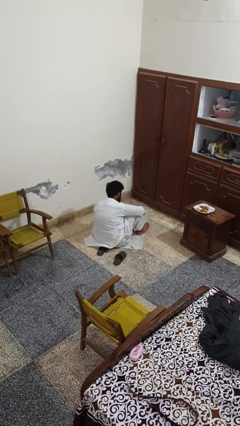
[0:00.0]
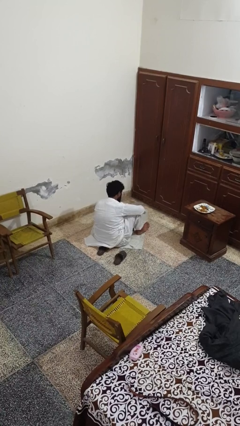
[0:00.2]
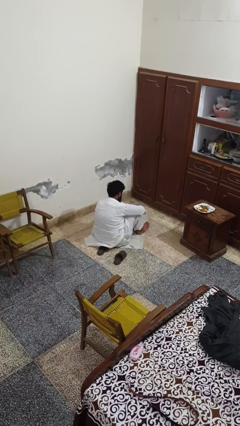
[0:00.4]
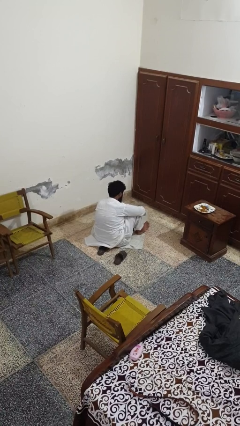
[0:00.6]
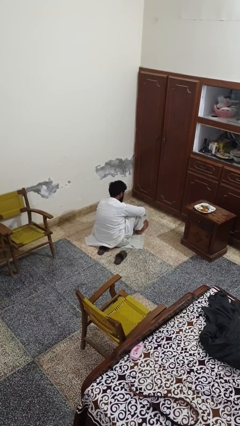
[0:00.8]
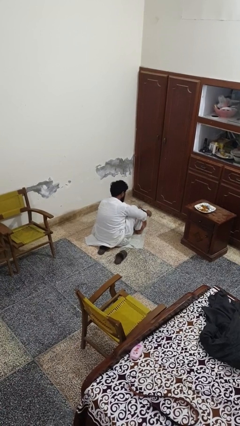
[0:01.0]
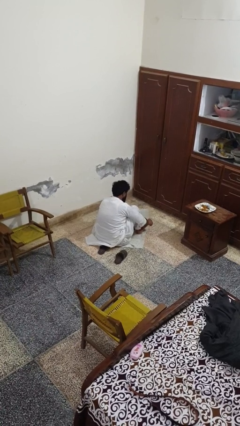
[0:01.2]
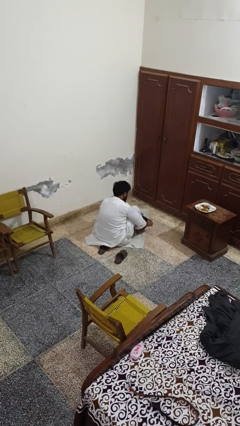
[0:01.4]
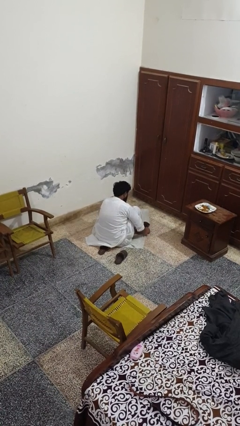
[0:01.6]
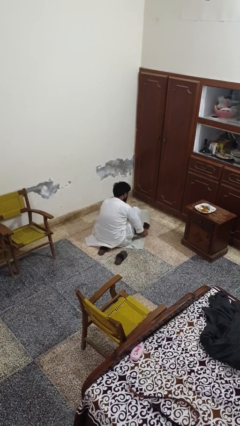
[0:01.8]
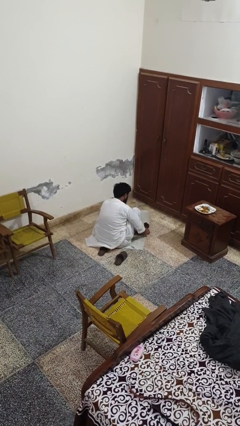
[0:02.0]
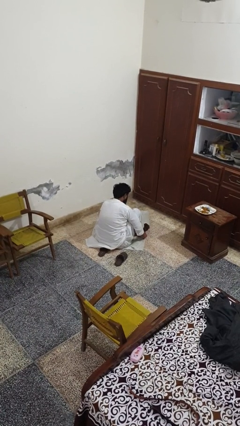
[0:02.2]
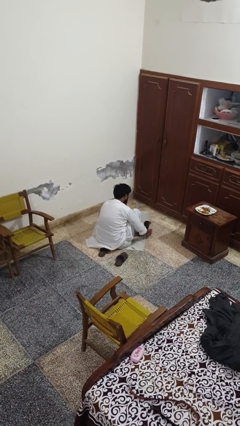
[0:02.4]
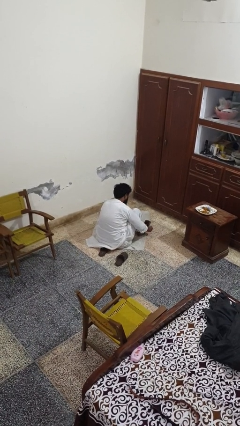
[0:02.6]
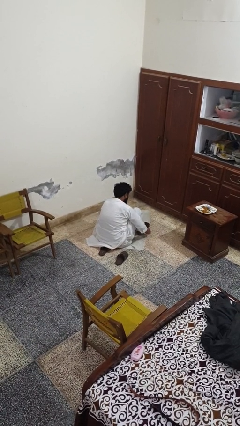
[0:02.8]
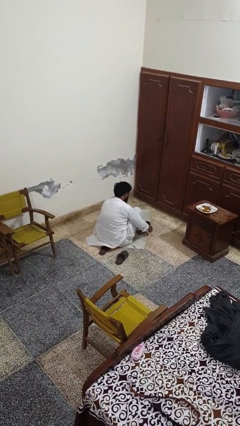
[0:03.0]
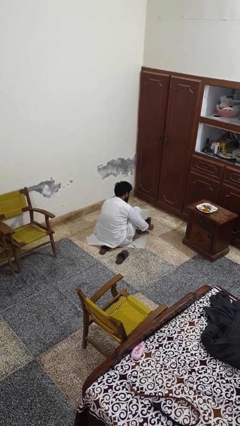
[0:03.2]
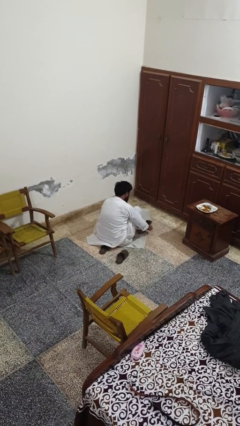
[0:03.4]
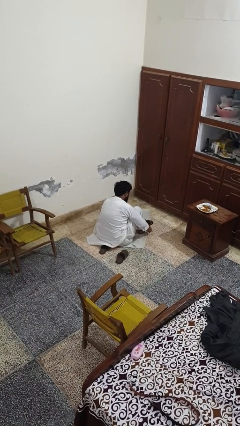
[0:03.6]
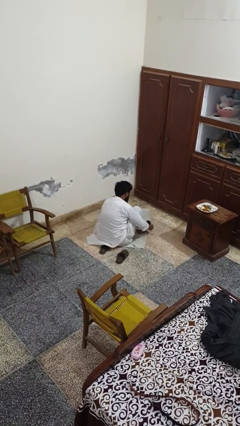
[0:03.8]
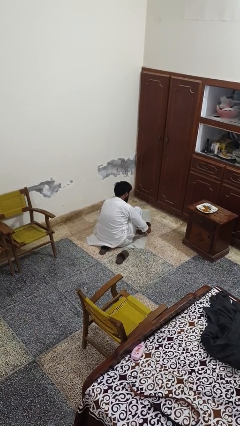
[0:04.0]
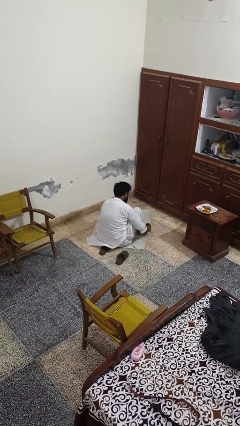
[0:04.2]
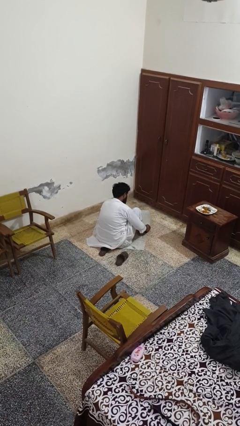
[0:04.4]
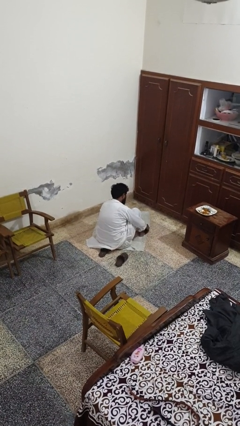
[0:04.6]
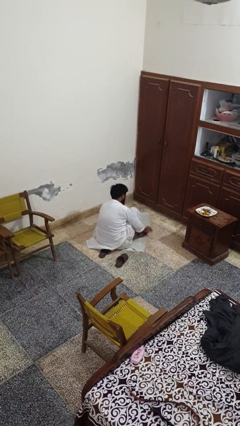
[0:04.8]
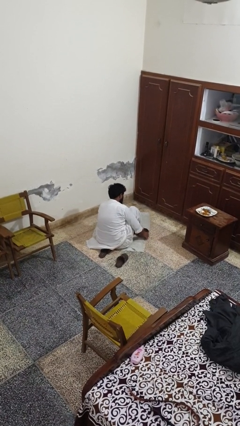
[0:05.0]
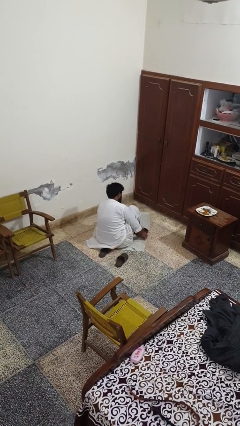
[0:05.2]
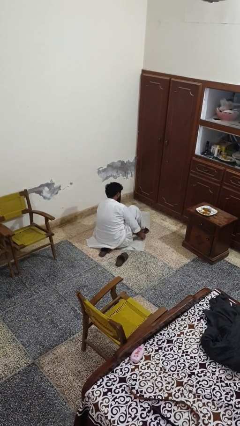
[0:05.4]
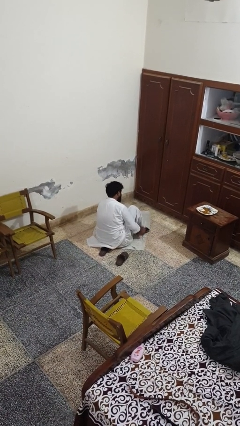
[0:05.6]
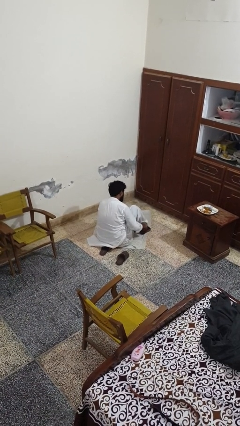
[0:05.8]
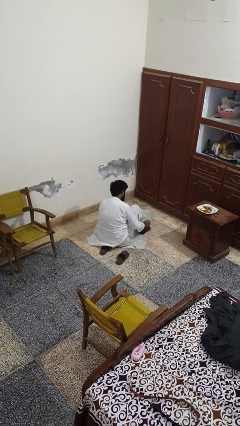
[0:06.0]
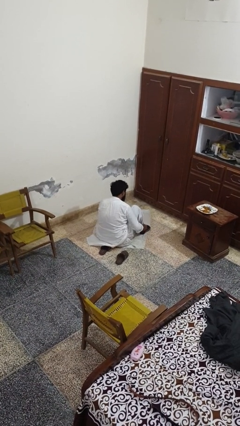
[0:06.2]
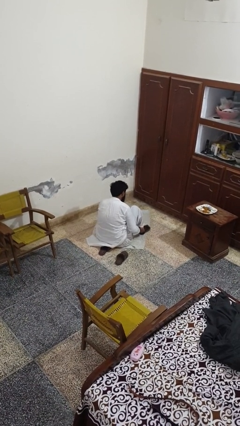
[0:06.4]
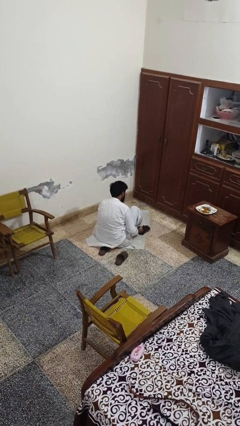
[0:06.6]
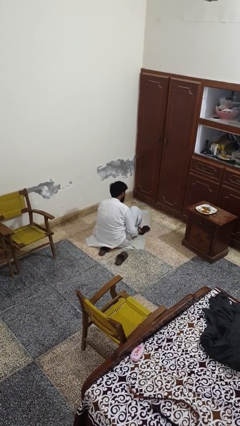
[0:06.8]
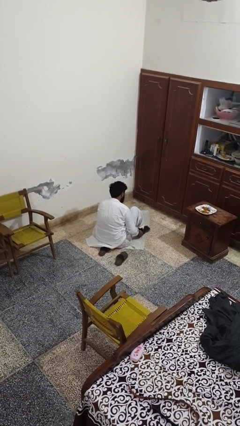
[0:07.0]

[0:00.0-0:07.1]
person puts on socks

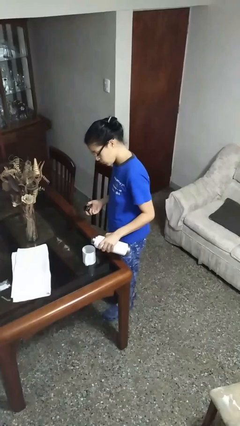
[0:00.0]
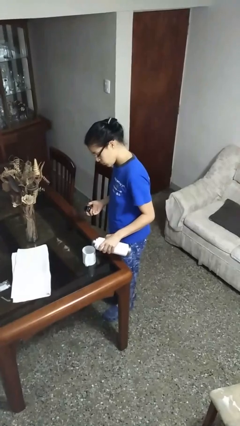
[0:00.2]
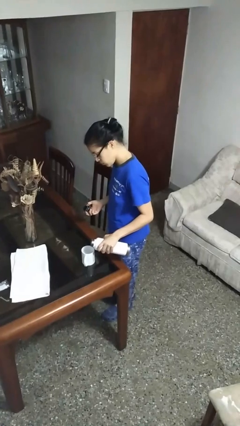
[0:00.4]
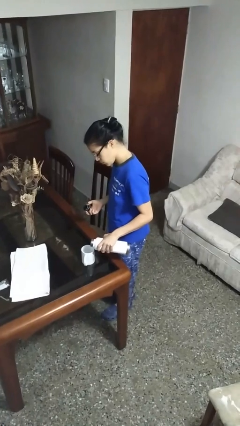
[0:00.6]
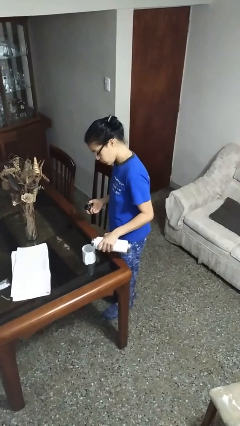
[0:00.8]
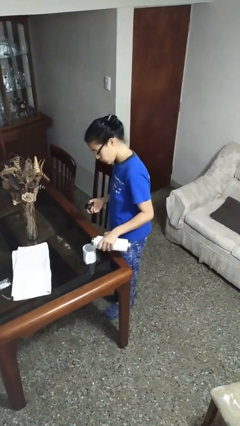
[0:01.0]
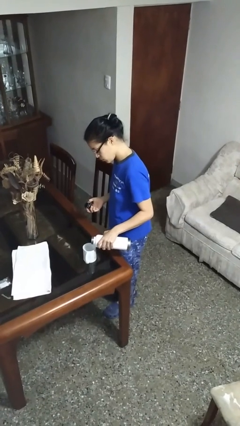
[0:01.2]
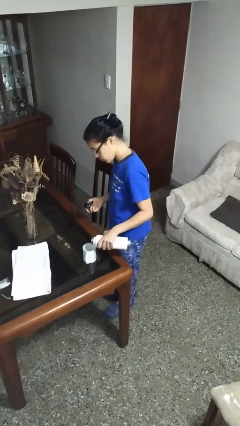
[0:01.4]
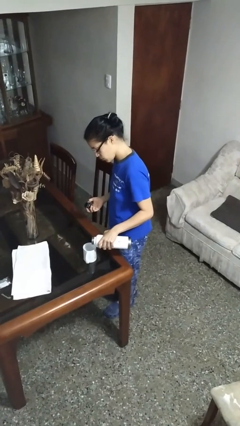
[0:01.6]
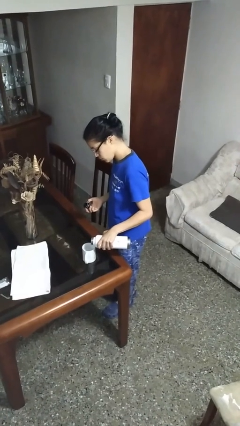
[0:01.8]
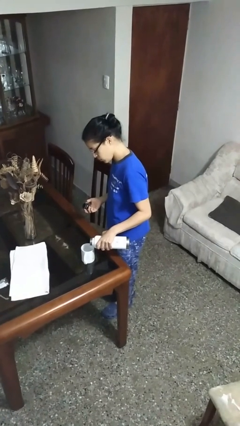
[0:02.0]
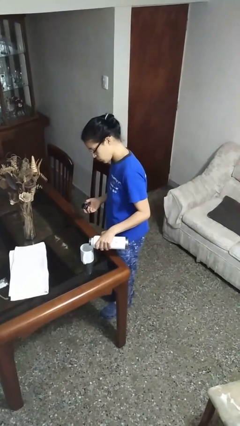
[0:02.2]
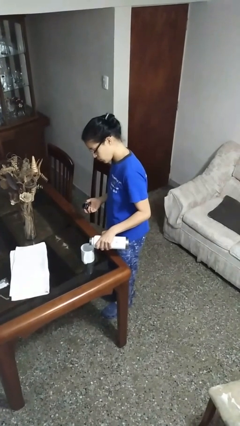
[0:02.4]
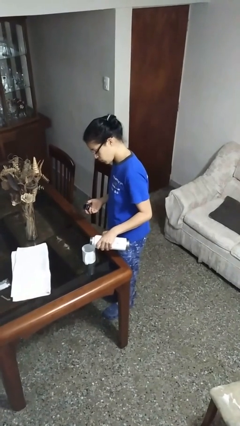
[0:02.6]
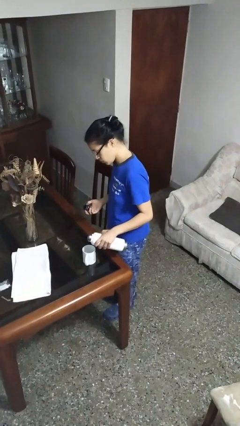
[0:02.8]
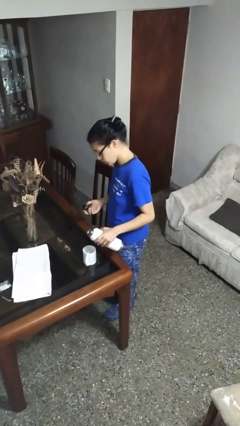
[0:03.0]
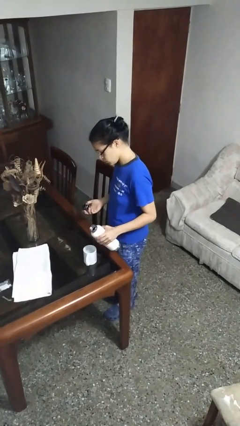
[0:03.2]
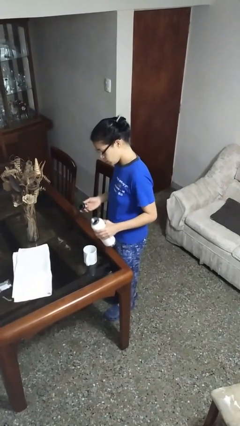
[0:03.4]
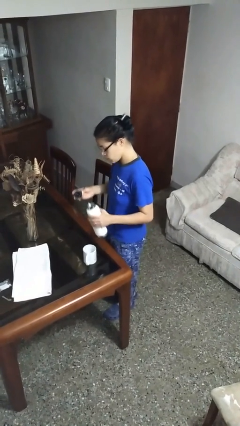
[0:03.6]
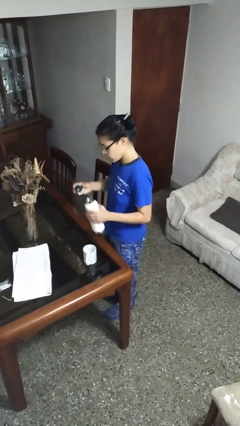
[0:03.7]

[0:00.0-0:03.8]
person pours liquid into cup

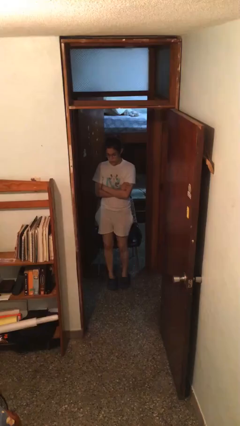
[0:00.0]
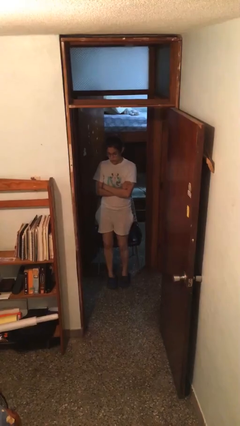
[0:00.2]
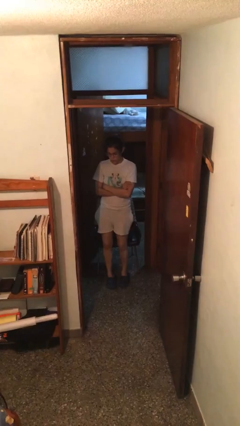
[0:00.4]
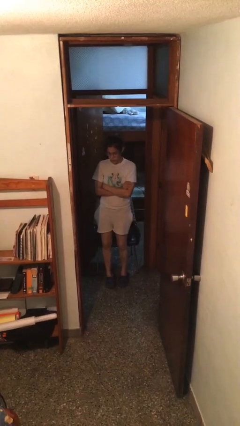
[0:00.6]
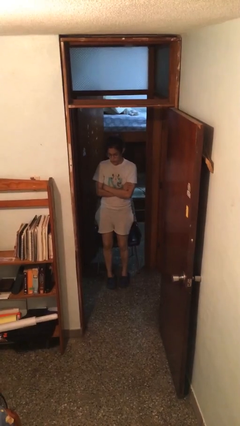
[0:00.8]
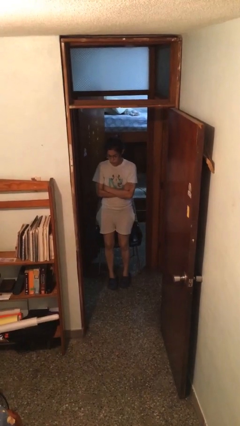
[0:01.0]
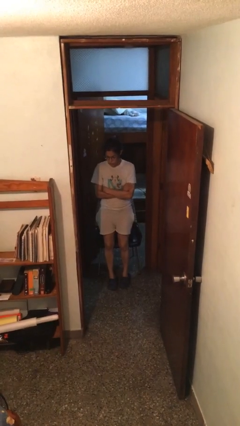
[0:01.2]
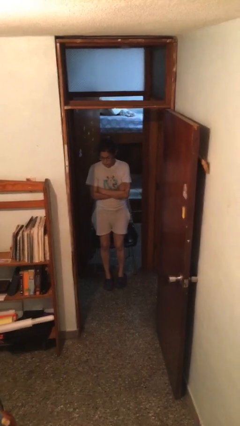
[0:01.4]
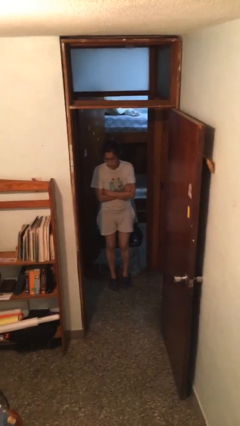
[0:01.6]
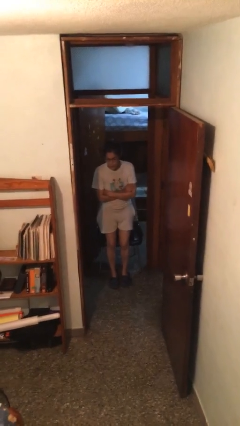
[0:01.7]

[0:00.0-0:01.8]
person stands up

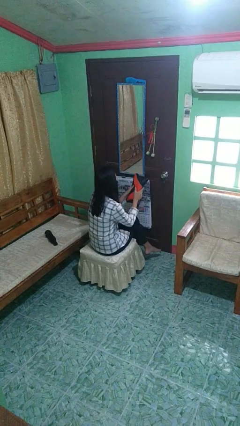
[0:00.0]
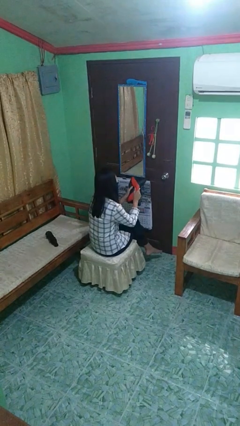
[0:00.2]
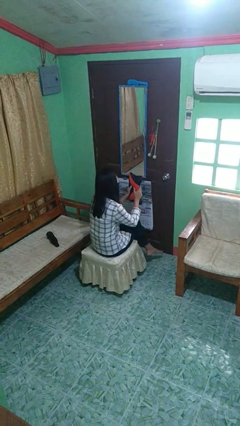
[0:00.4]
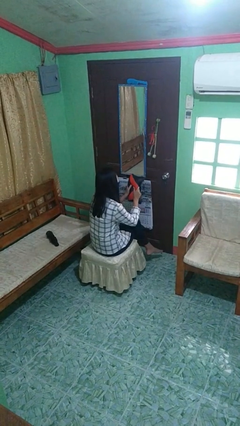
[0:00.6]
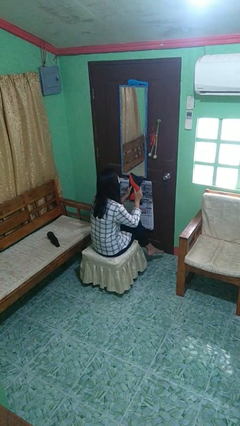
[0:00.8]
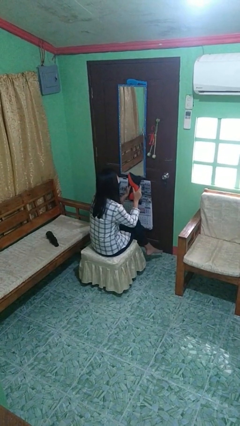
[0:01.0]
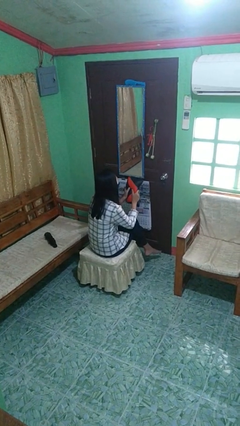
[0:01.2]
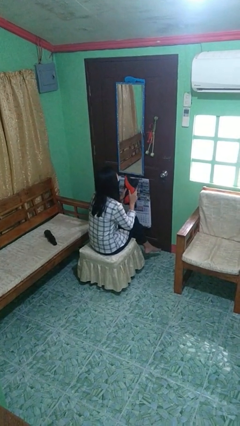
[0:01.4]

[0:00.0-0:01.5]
person squeezes object

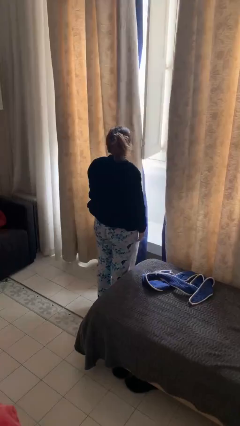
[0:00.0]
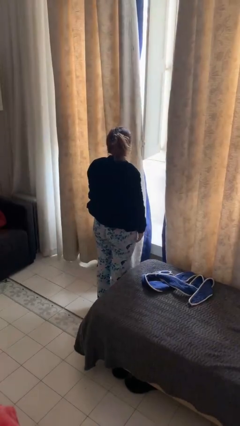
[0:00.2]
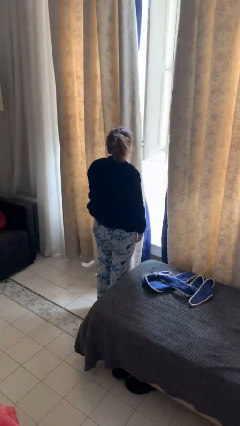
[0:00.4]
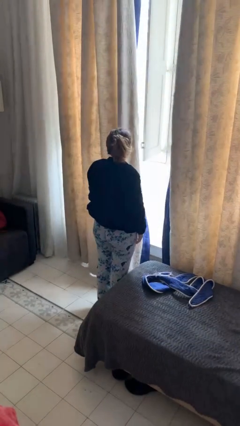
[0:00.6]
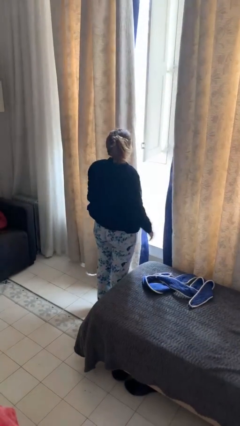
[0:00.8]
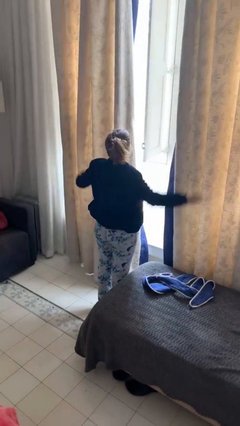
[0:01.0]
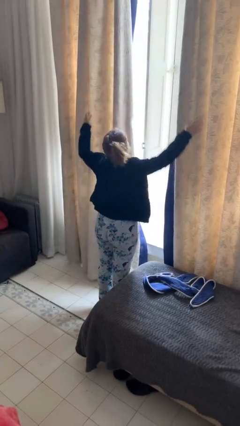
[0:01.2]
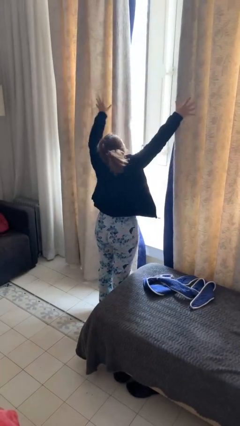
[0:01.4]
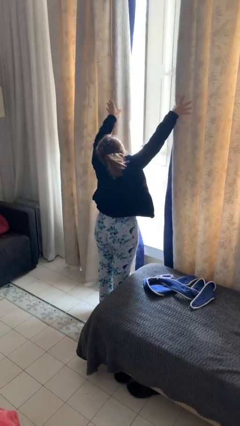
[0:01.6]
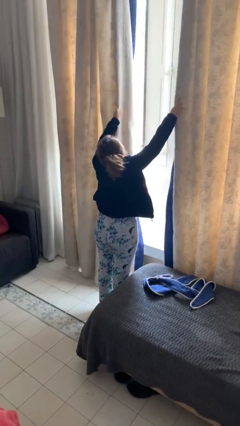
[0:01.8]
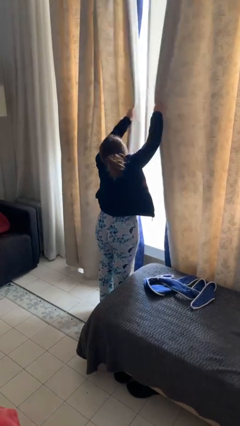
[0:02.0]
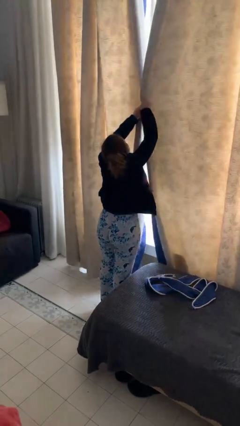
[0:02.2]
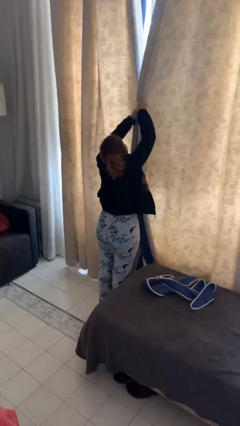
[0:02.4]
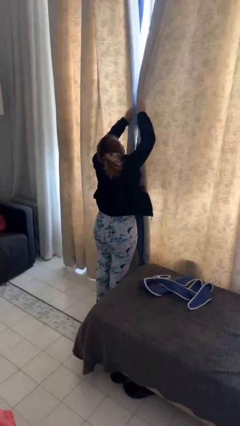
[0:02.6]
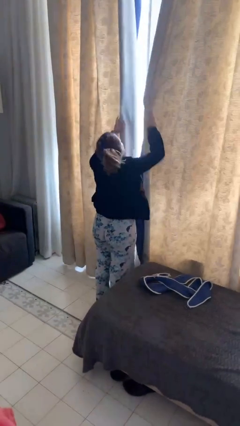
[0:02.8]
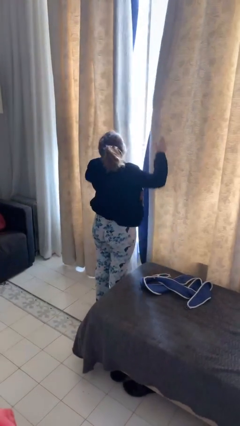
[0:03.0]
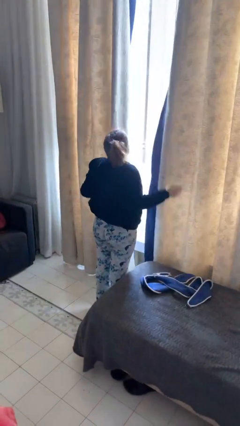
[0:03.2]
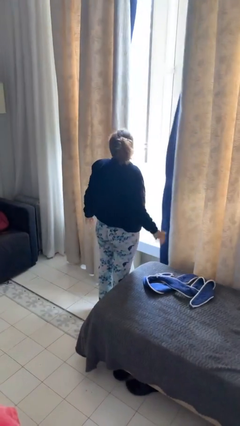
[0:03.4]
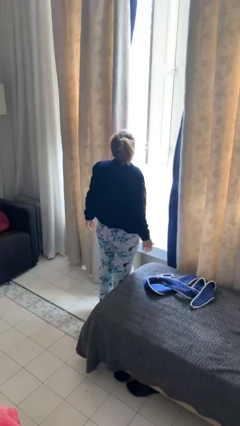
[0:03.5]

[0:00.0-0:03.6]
person closes curtains
